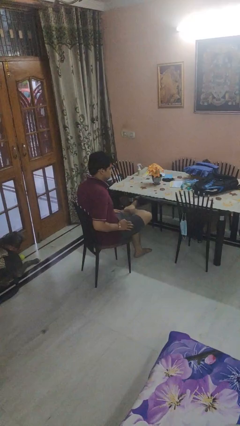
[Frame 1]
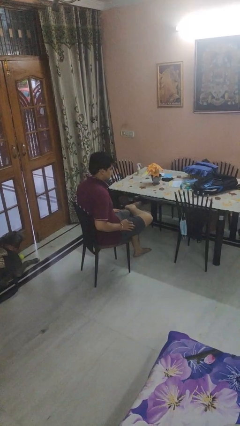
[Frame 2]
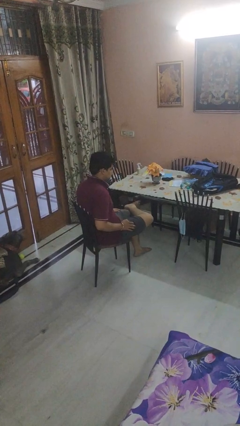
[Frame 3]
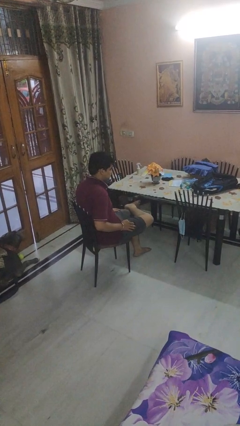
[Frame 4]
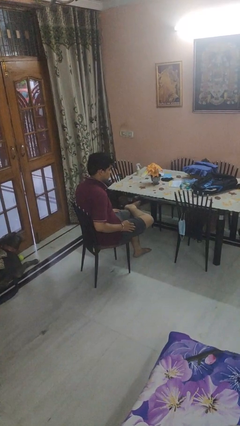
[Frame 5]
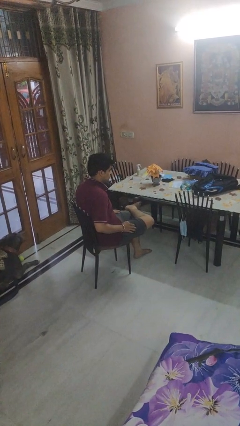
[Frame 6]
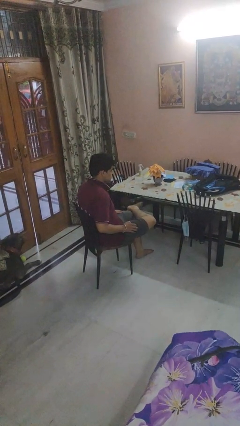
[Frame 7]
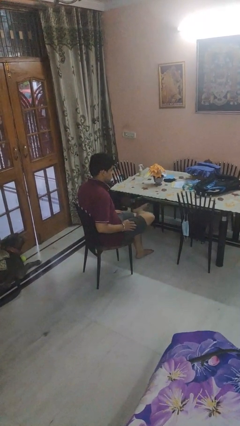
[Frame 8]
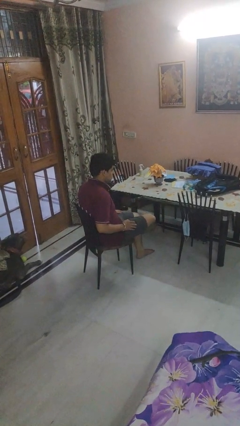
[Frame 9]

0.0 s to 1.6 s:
person crosses legs

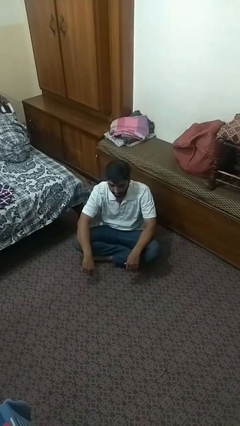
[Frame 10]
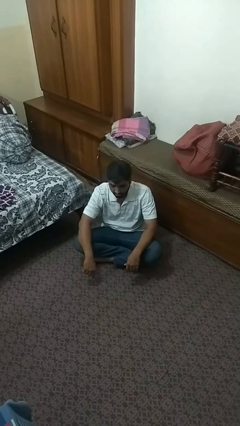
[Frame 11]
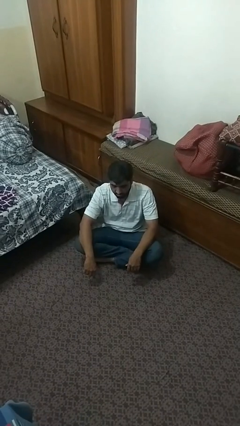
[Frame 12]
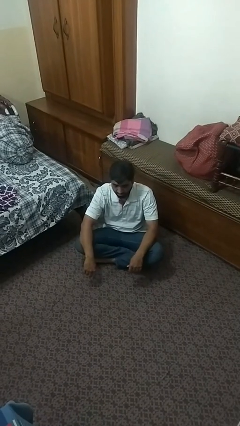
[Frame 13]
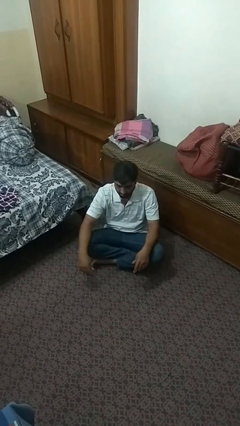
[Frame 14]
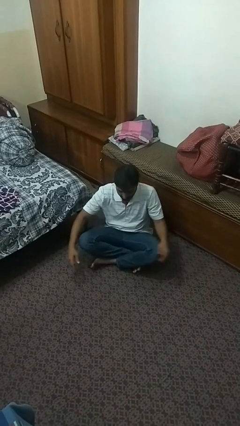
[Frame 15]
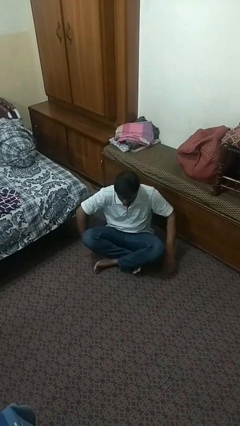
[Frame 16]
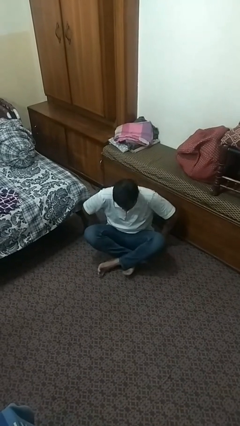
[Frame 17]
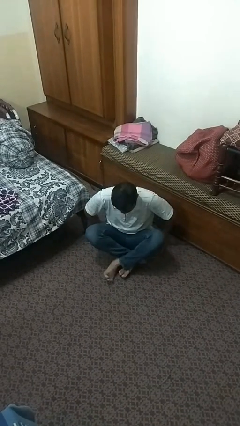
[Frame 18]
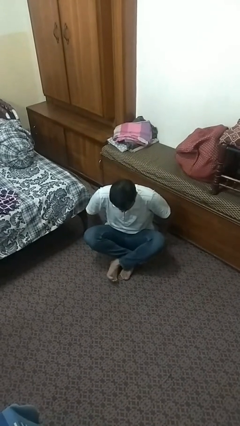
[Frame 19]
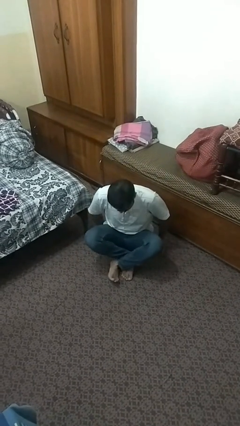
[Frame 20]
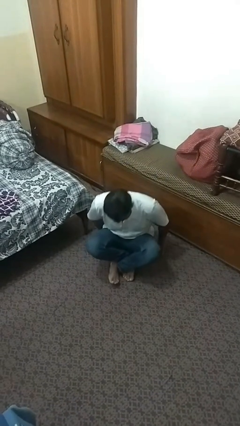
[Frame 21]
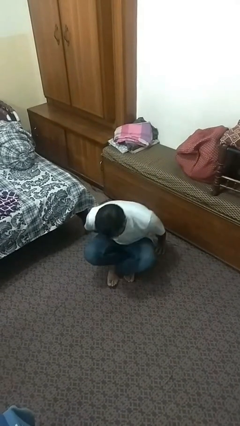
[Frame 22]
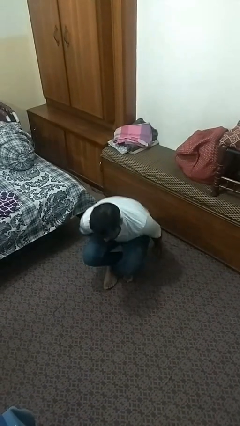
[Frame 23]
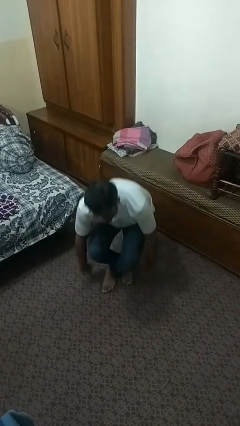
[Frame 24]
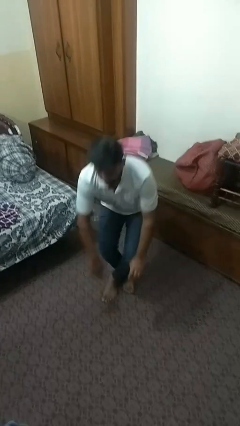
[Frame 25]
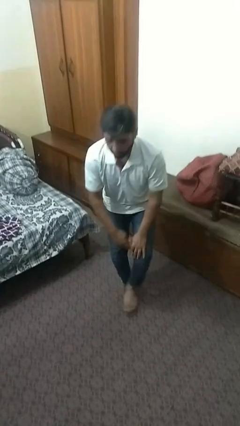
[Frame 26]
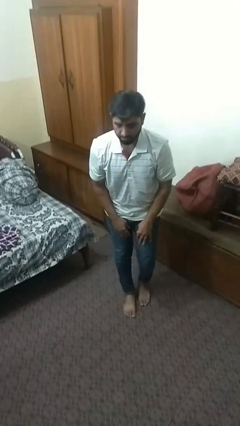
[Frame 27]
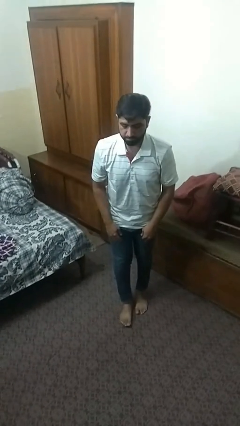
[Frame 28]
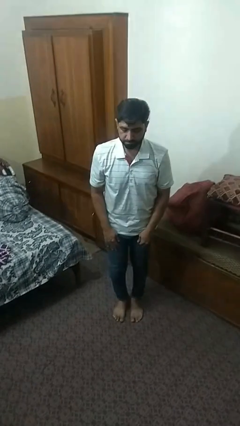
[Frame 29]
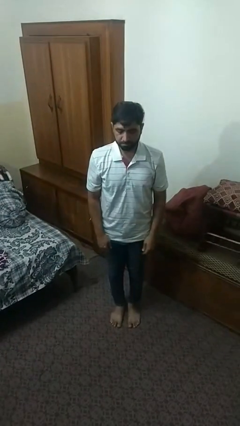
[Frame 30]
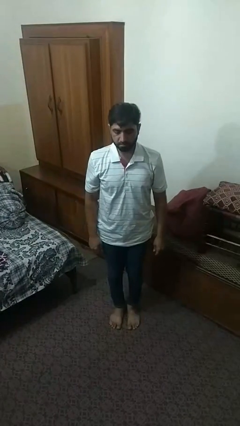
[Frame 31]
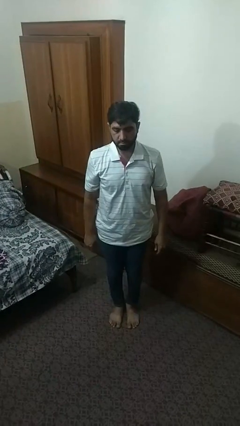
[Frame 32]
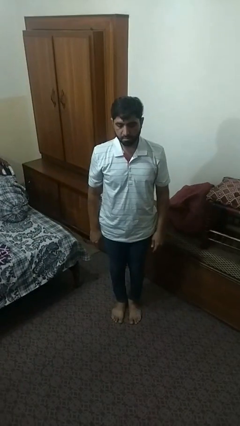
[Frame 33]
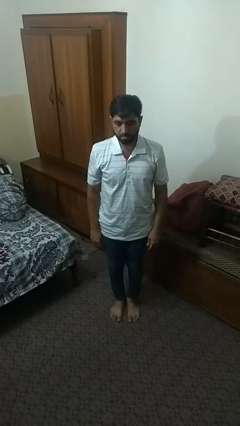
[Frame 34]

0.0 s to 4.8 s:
person stands up from floor

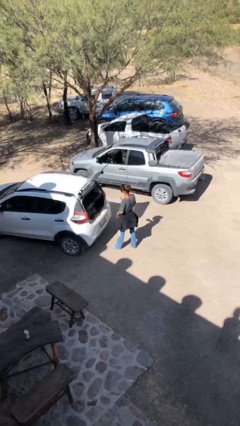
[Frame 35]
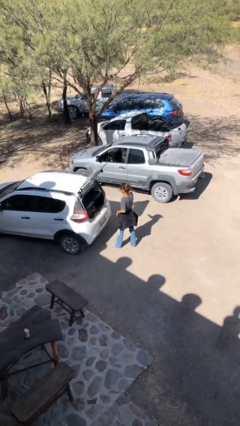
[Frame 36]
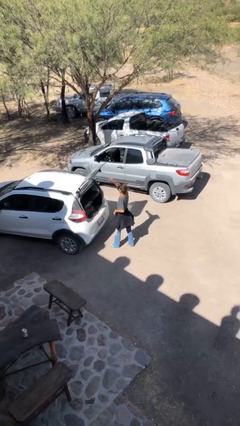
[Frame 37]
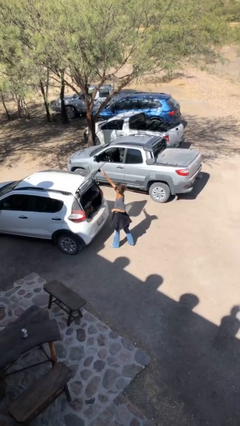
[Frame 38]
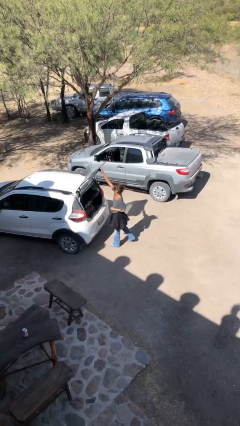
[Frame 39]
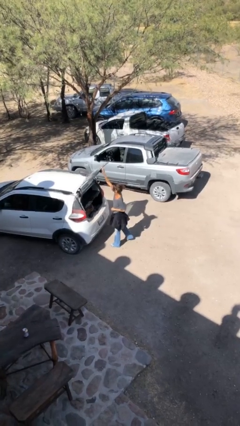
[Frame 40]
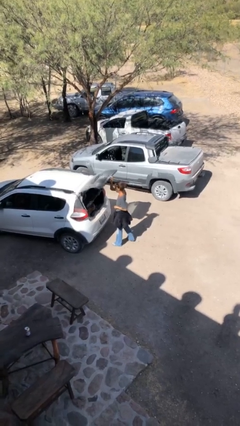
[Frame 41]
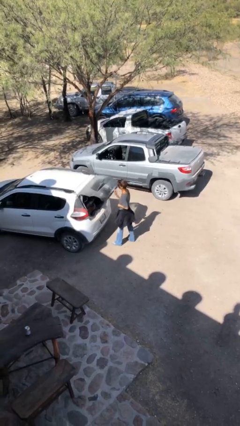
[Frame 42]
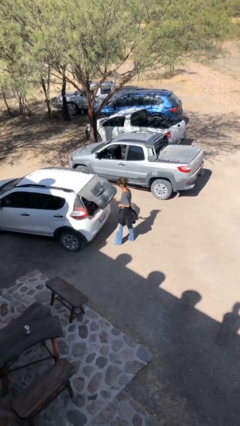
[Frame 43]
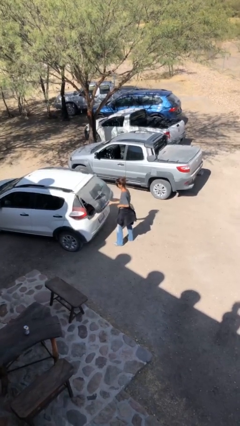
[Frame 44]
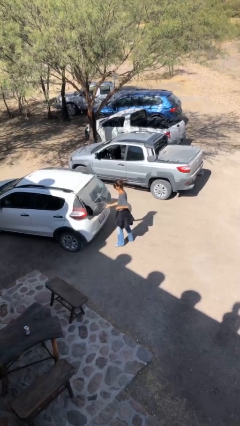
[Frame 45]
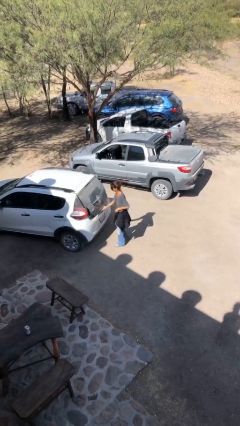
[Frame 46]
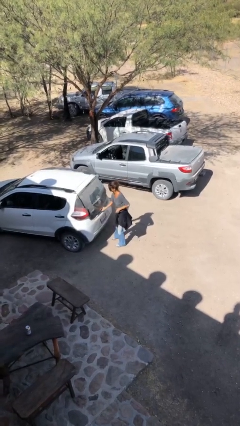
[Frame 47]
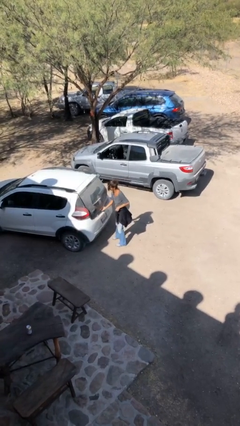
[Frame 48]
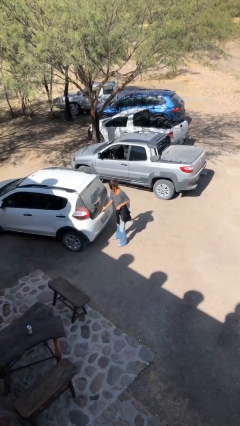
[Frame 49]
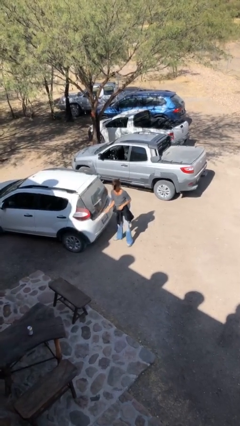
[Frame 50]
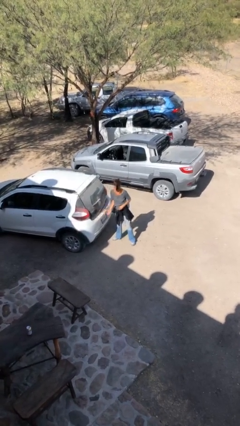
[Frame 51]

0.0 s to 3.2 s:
person closes car trunk

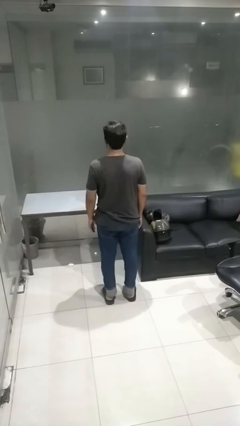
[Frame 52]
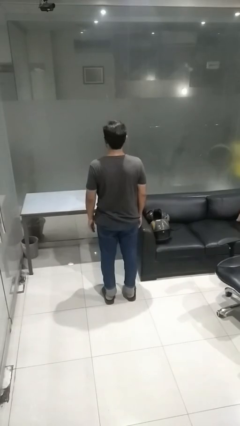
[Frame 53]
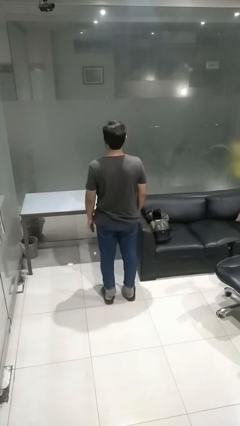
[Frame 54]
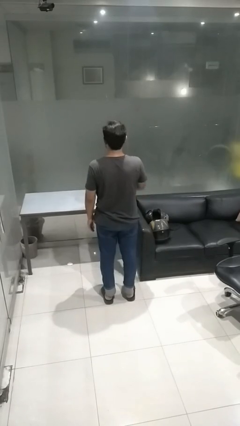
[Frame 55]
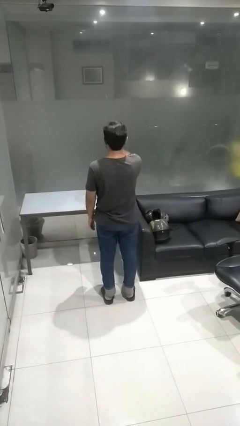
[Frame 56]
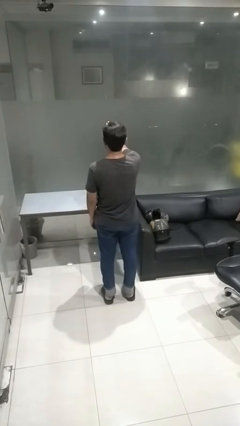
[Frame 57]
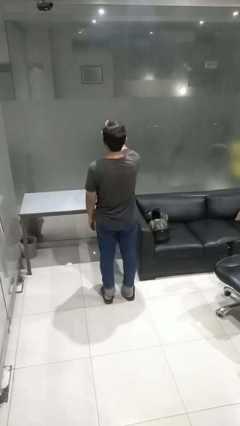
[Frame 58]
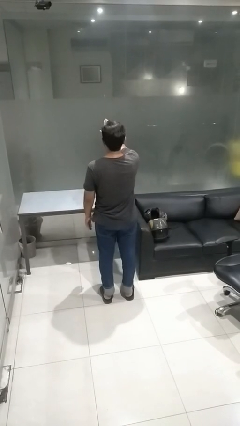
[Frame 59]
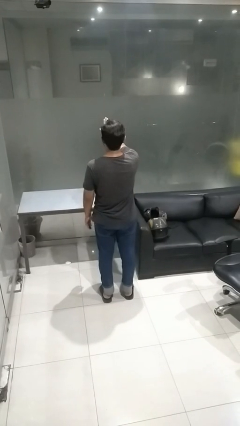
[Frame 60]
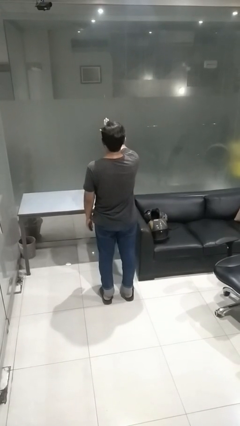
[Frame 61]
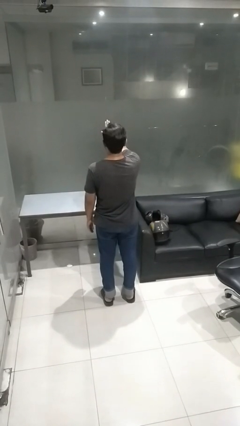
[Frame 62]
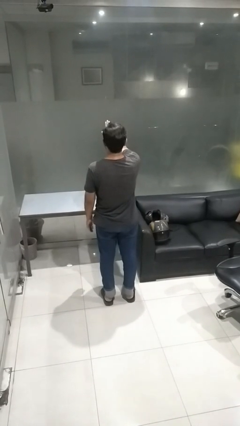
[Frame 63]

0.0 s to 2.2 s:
person gestures stop

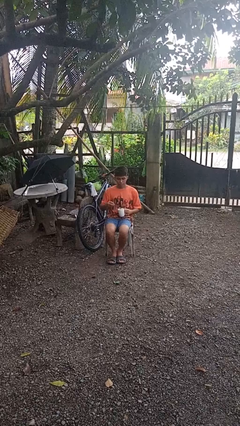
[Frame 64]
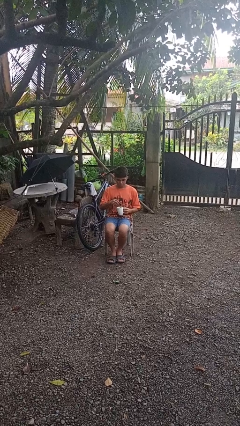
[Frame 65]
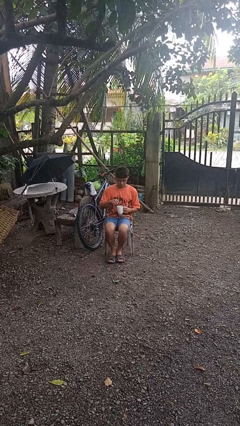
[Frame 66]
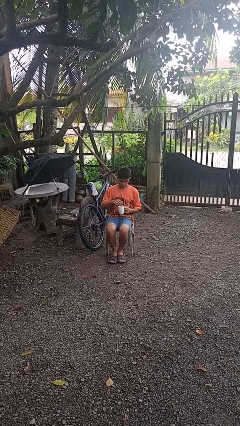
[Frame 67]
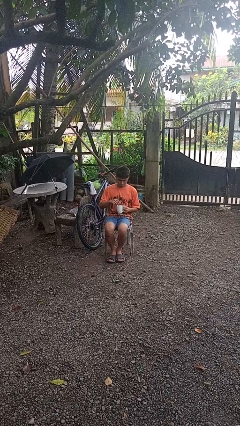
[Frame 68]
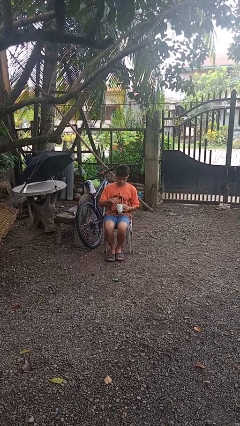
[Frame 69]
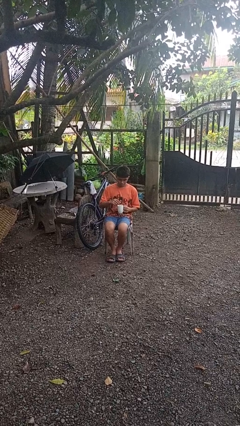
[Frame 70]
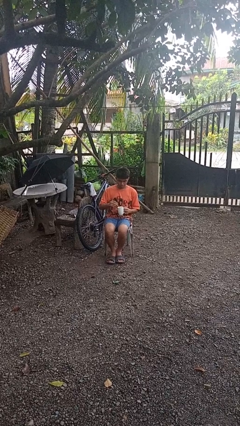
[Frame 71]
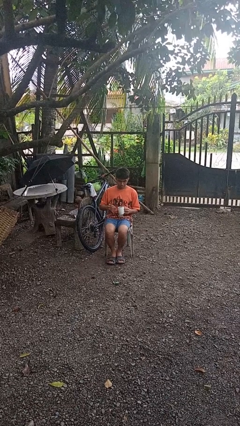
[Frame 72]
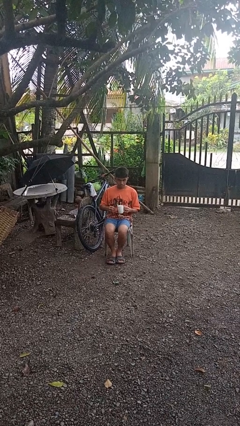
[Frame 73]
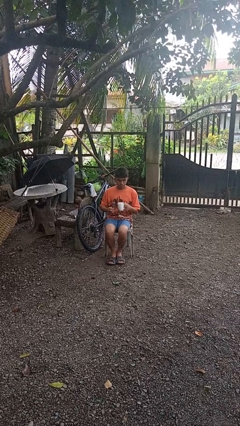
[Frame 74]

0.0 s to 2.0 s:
person stirs mug

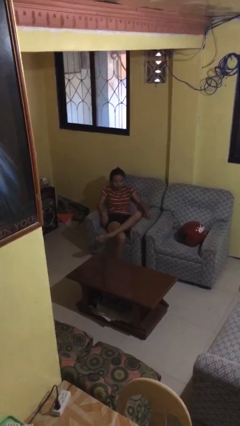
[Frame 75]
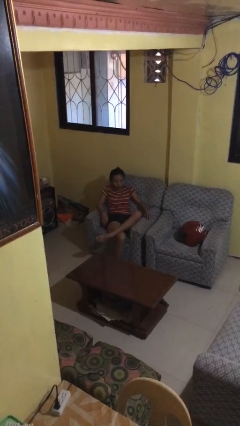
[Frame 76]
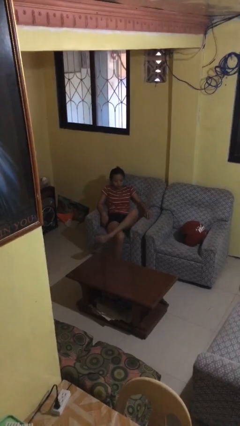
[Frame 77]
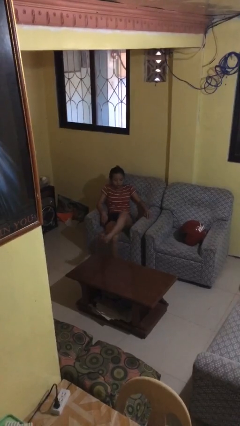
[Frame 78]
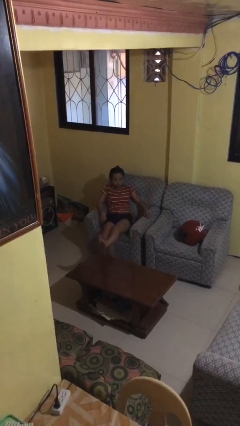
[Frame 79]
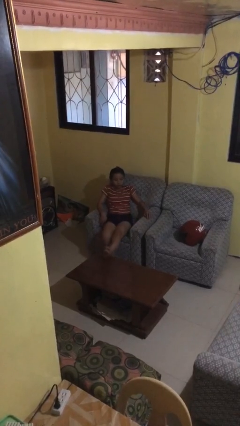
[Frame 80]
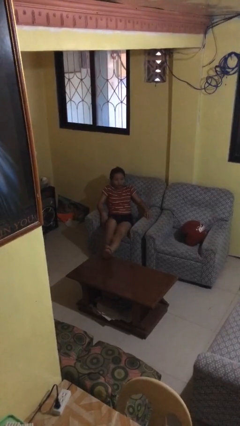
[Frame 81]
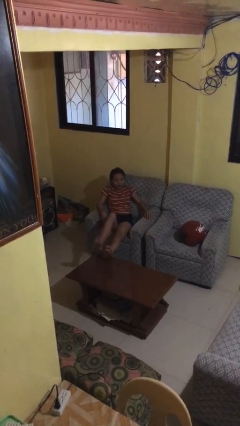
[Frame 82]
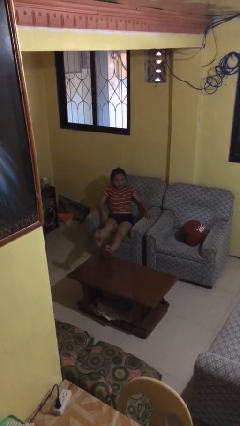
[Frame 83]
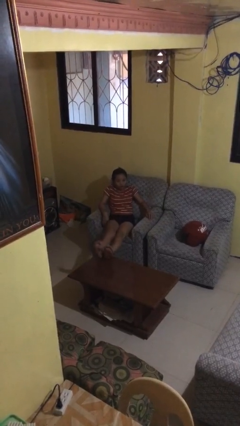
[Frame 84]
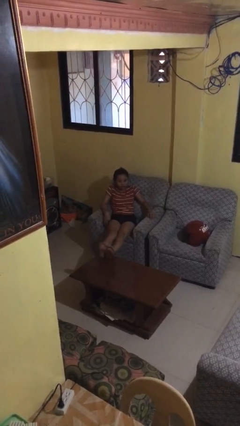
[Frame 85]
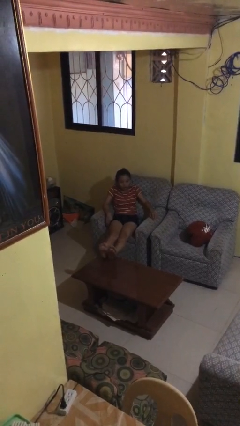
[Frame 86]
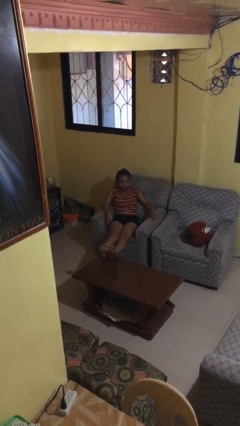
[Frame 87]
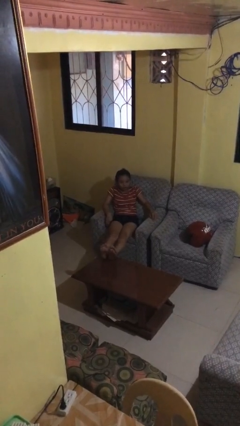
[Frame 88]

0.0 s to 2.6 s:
person puts feet up

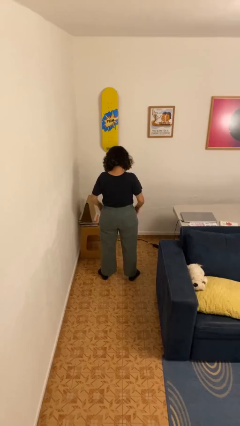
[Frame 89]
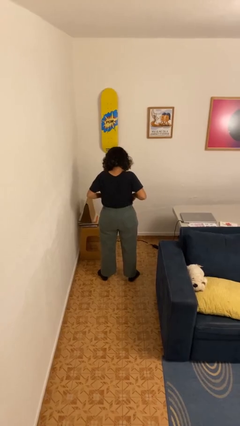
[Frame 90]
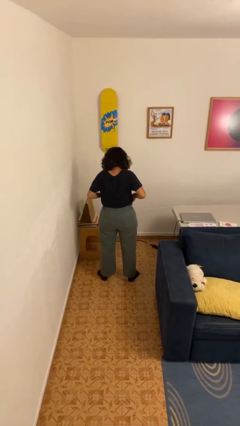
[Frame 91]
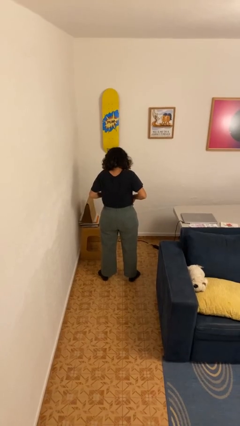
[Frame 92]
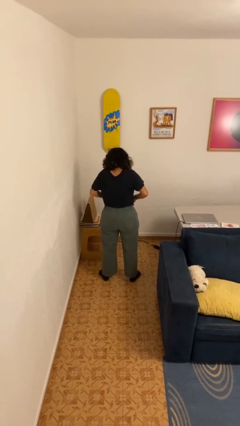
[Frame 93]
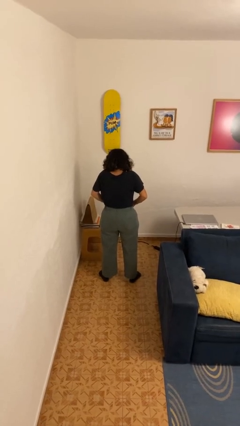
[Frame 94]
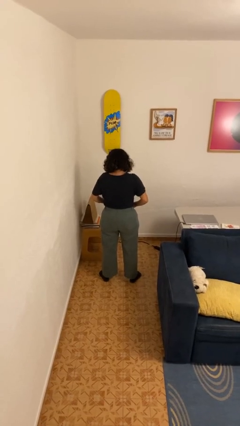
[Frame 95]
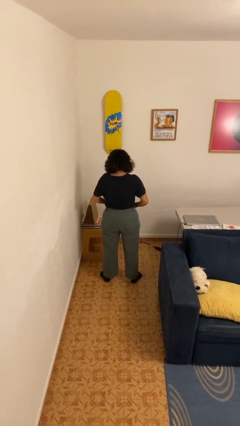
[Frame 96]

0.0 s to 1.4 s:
person puts hands in back pockets
